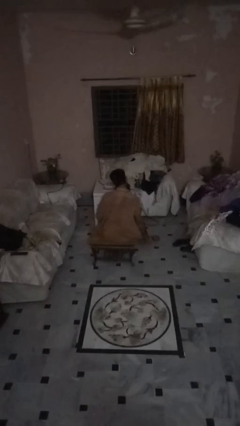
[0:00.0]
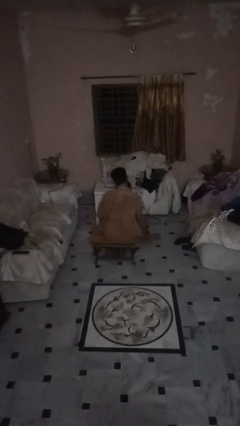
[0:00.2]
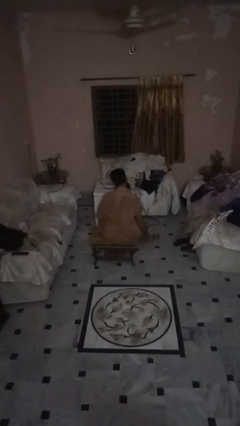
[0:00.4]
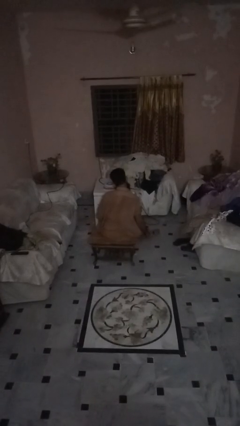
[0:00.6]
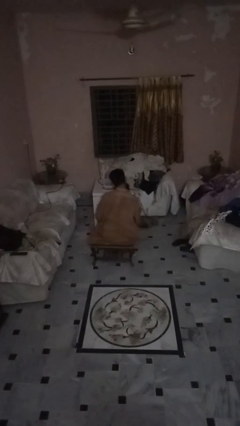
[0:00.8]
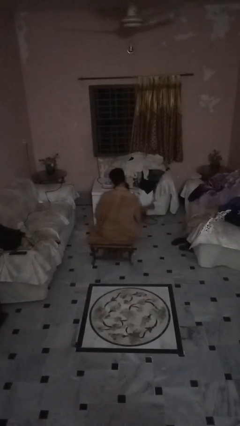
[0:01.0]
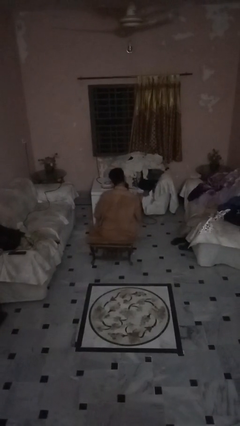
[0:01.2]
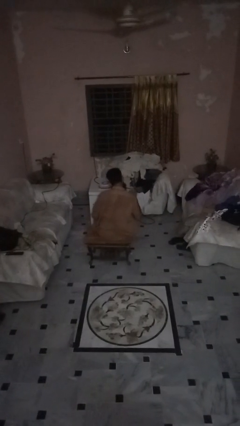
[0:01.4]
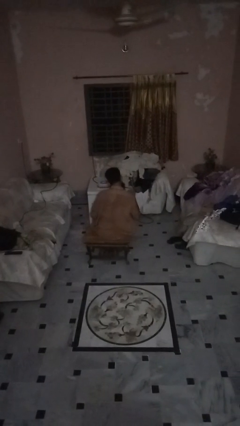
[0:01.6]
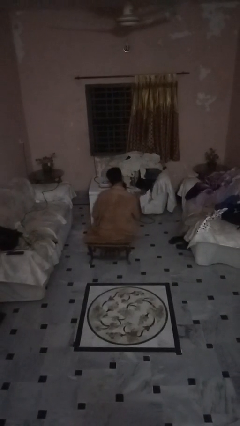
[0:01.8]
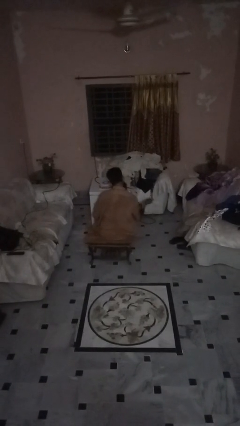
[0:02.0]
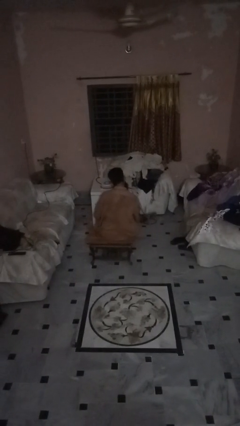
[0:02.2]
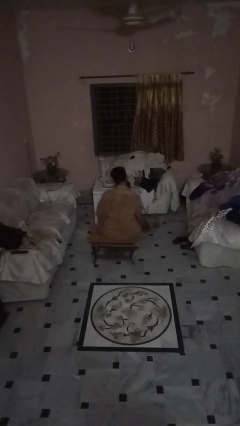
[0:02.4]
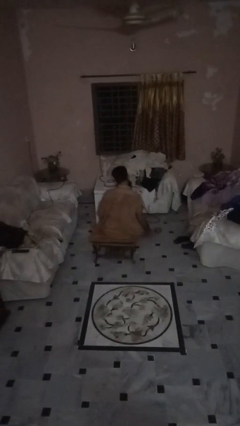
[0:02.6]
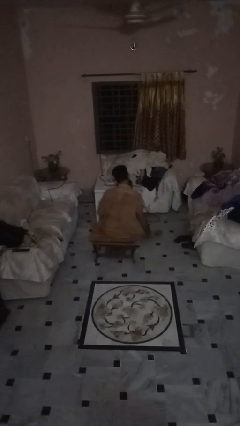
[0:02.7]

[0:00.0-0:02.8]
person lifts dumbbells

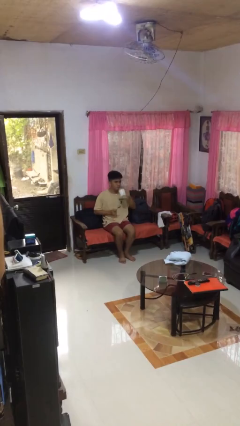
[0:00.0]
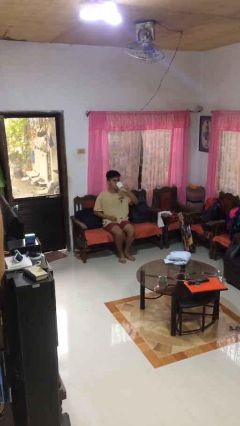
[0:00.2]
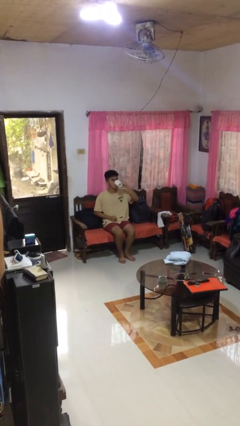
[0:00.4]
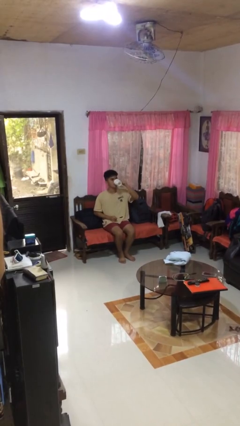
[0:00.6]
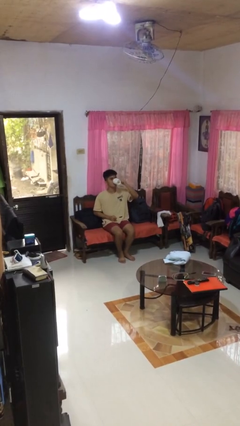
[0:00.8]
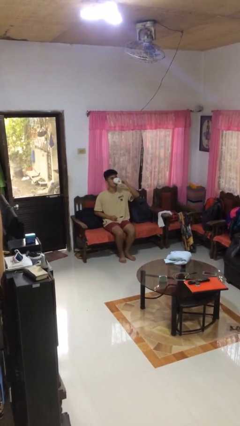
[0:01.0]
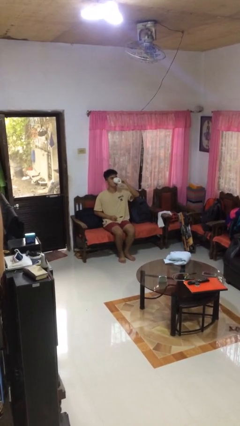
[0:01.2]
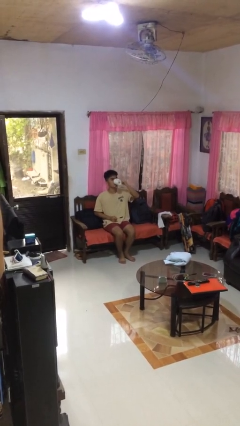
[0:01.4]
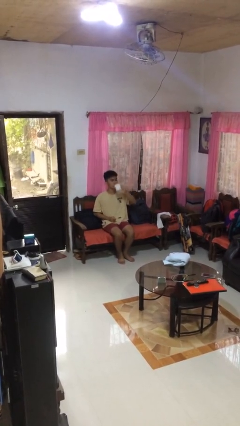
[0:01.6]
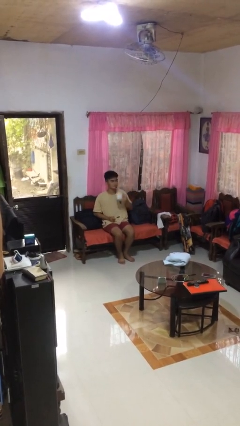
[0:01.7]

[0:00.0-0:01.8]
person drinks from mug

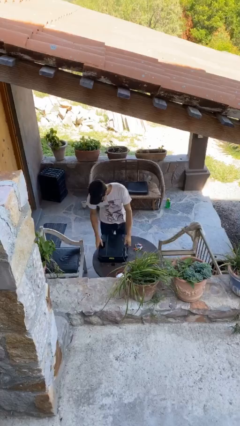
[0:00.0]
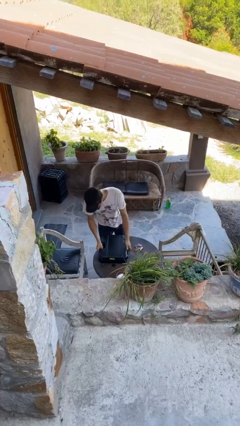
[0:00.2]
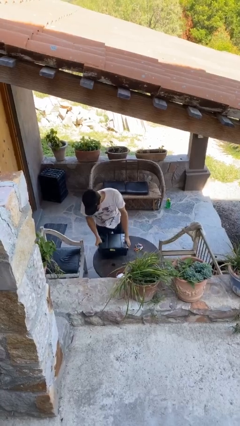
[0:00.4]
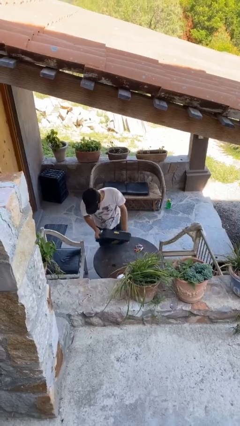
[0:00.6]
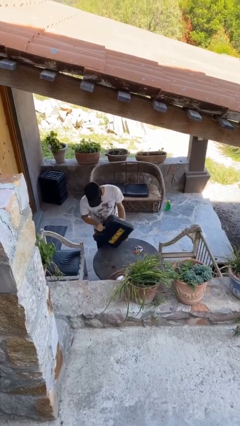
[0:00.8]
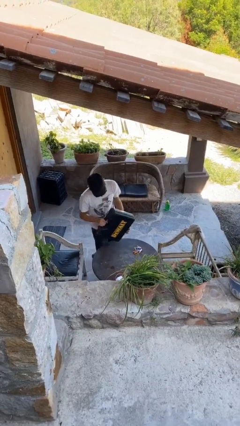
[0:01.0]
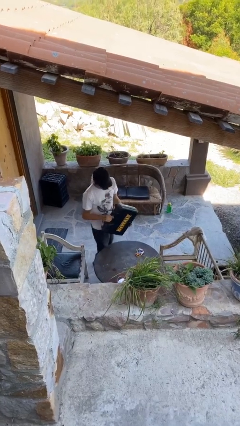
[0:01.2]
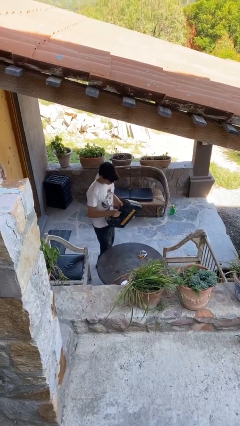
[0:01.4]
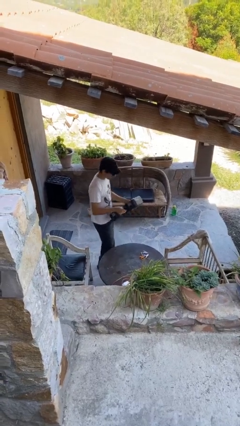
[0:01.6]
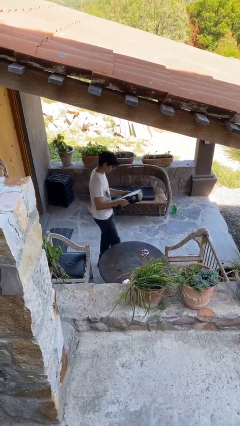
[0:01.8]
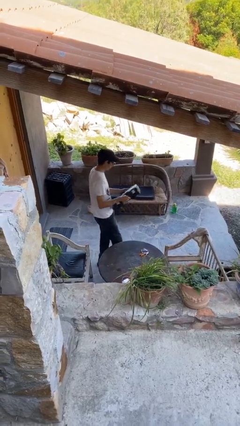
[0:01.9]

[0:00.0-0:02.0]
person picks up object from table

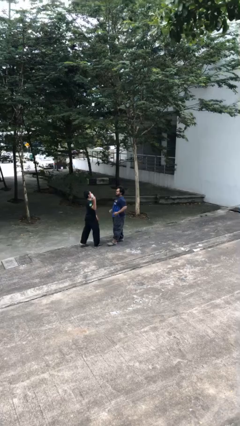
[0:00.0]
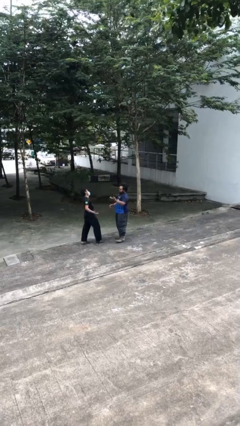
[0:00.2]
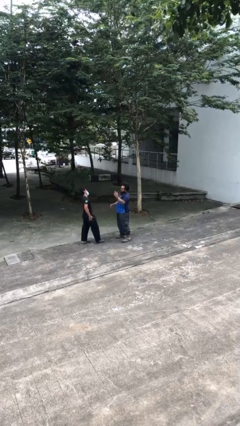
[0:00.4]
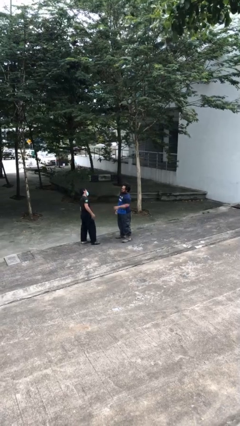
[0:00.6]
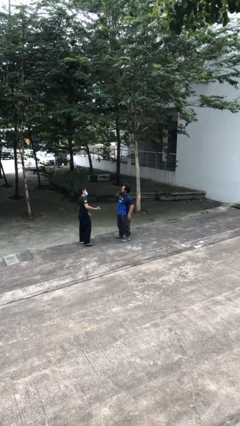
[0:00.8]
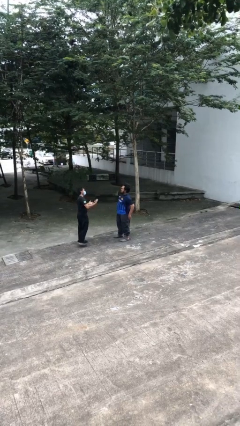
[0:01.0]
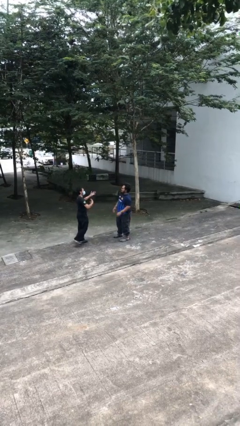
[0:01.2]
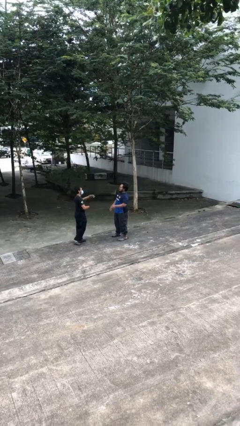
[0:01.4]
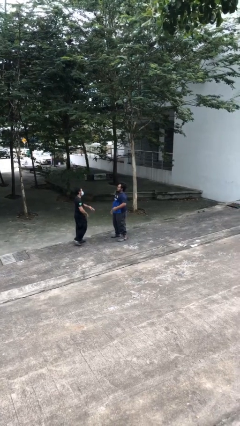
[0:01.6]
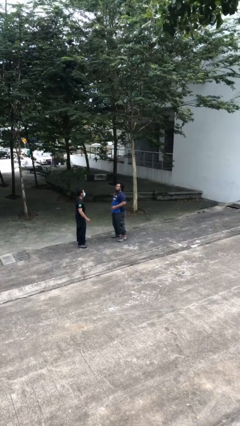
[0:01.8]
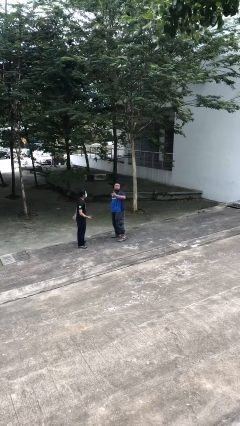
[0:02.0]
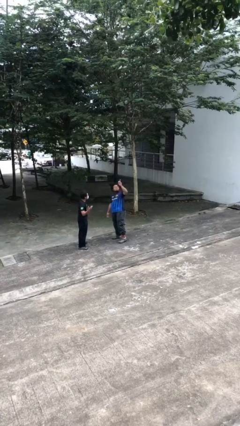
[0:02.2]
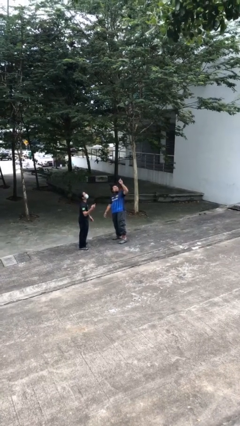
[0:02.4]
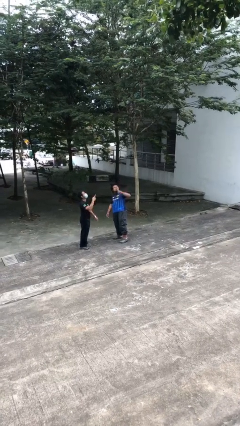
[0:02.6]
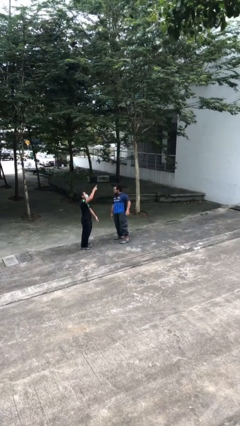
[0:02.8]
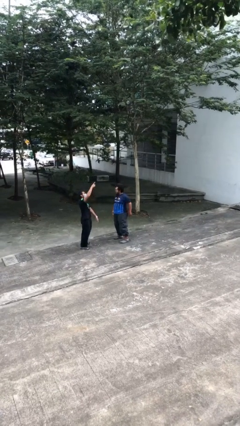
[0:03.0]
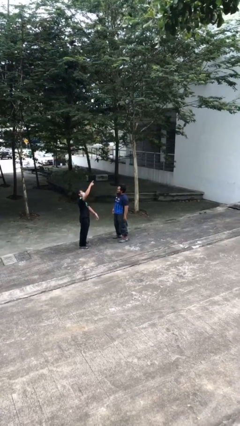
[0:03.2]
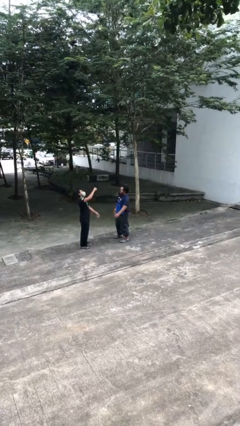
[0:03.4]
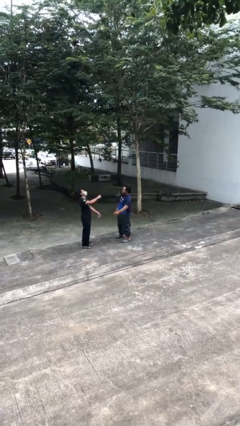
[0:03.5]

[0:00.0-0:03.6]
person talks to person

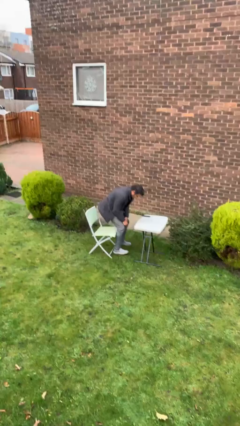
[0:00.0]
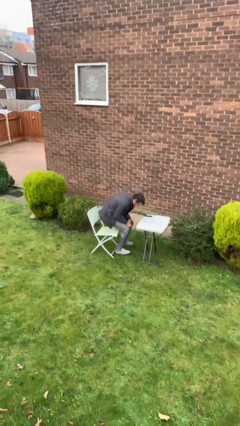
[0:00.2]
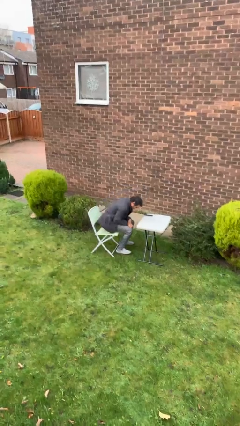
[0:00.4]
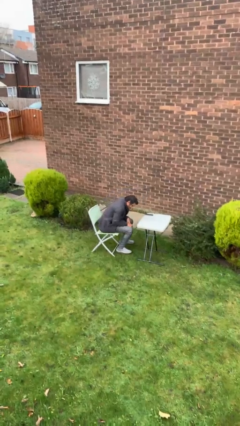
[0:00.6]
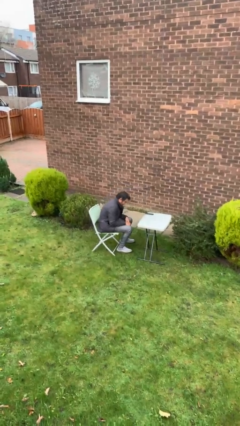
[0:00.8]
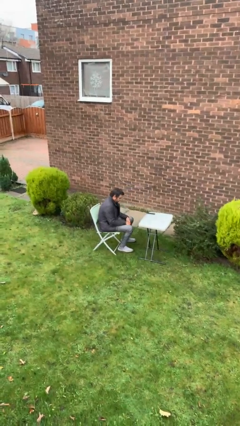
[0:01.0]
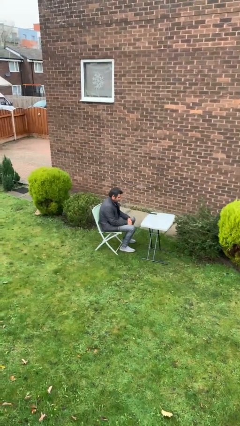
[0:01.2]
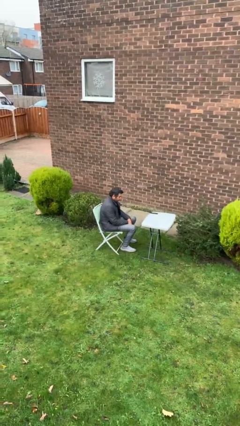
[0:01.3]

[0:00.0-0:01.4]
person sits down

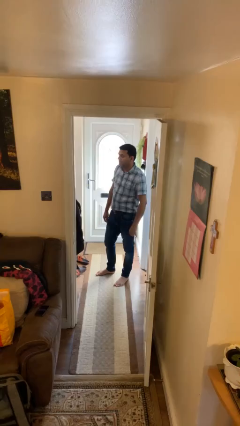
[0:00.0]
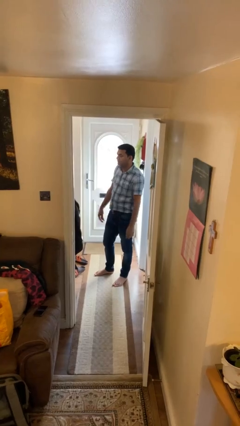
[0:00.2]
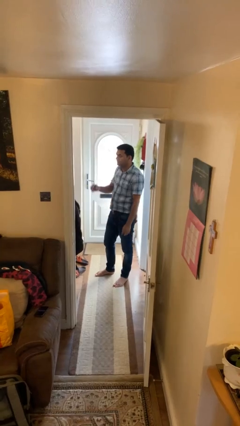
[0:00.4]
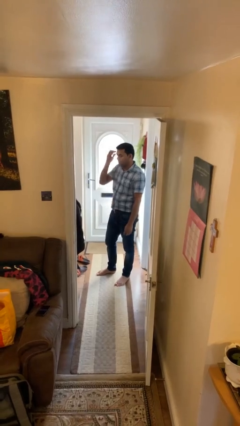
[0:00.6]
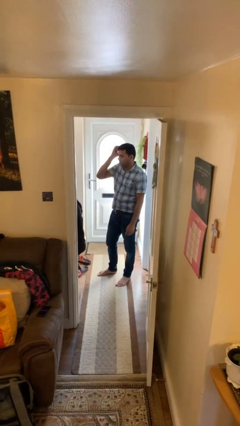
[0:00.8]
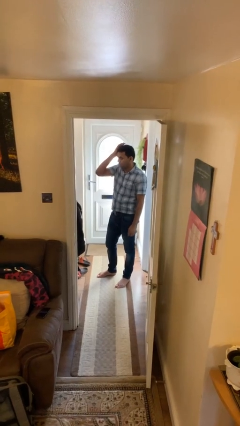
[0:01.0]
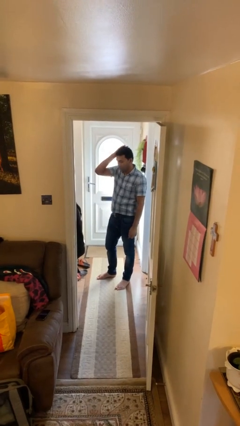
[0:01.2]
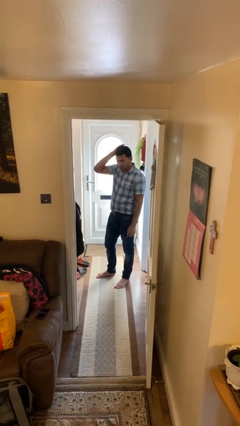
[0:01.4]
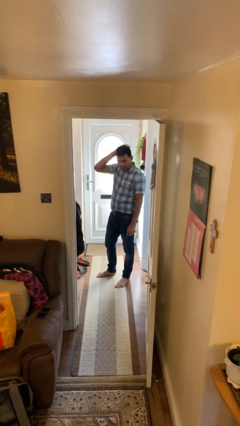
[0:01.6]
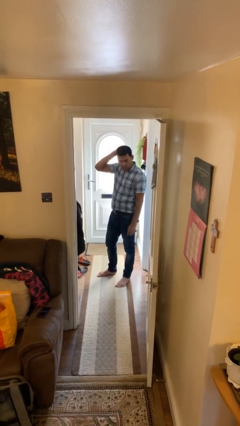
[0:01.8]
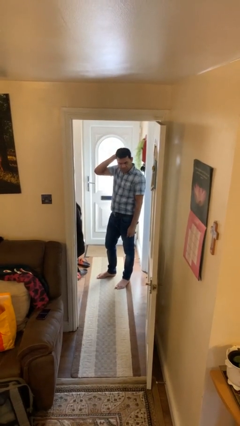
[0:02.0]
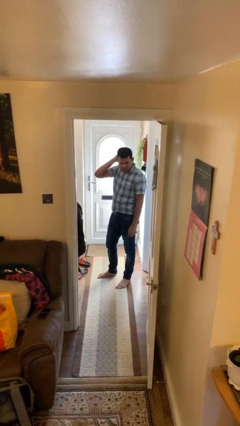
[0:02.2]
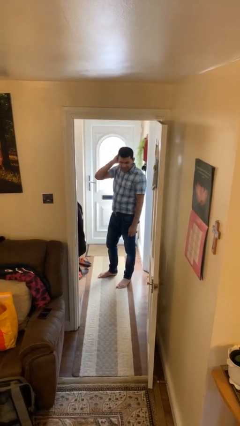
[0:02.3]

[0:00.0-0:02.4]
person strokes hair

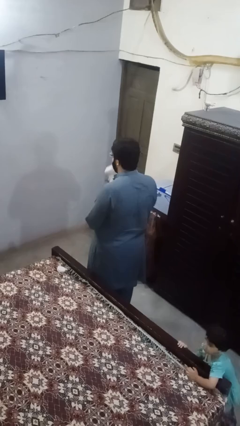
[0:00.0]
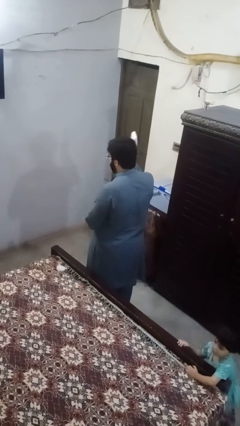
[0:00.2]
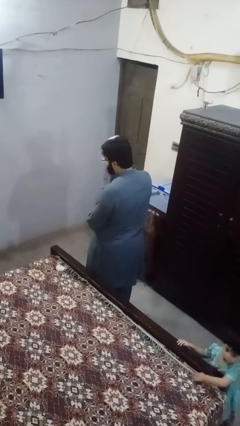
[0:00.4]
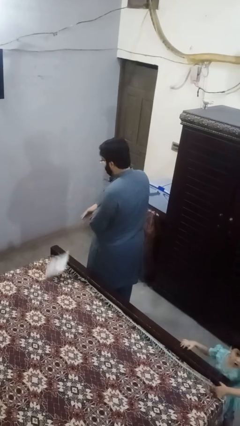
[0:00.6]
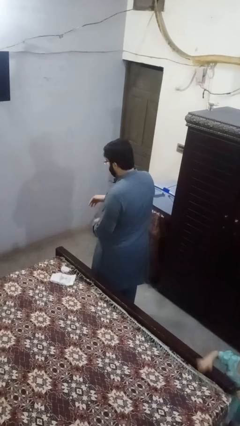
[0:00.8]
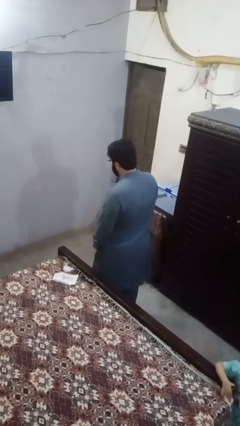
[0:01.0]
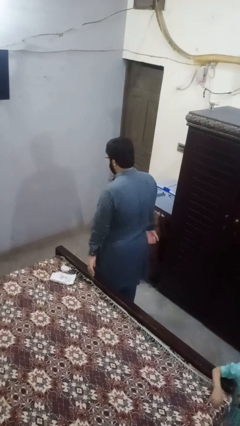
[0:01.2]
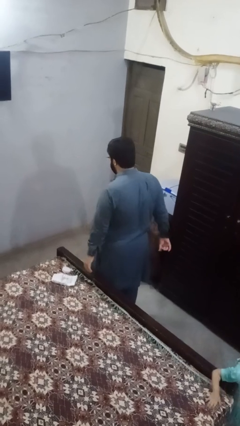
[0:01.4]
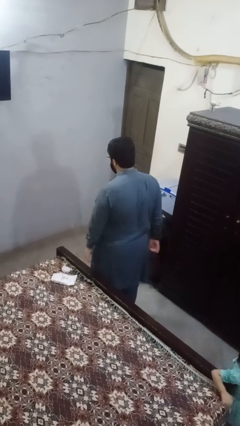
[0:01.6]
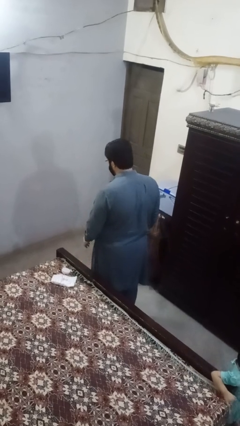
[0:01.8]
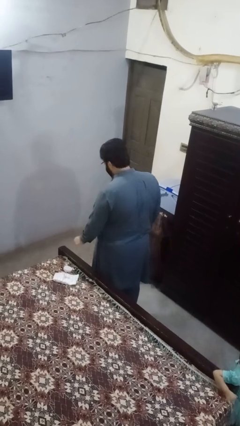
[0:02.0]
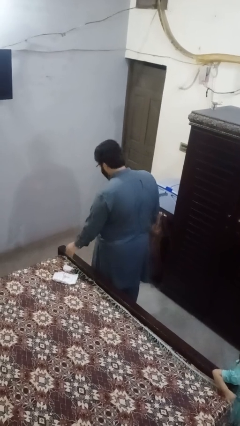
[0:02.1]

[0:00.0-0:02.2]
person throws object on bed

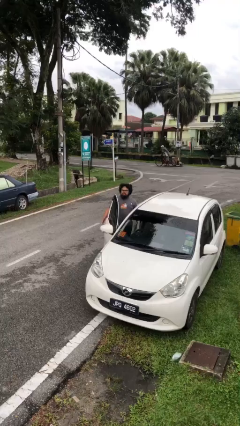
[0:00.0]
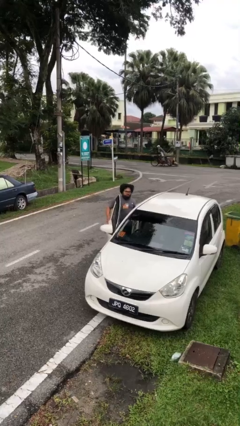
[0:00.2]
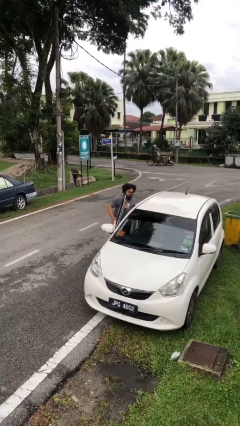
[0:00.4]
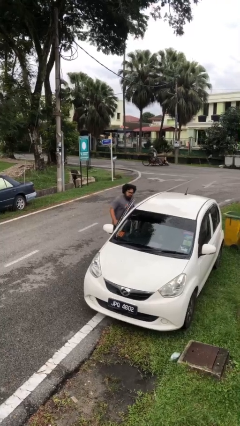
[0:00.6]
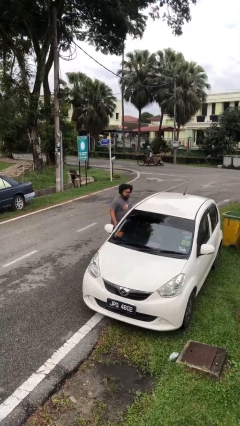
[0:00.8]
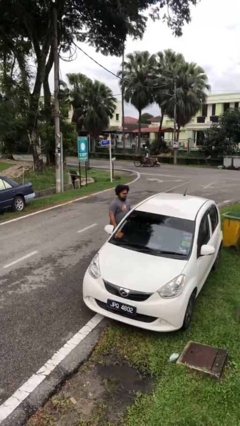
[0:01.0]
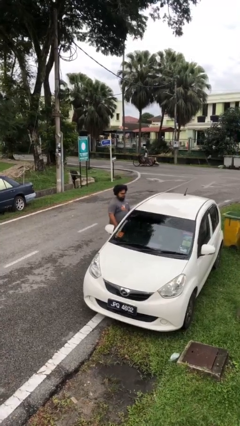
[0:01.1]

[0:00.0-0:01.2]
person closes car door
